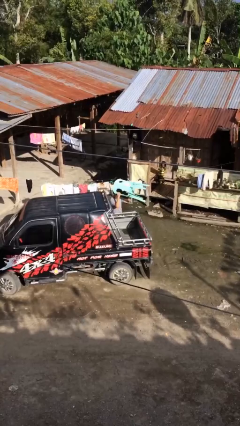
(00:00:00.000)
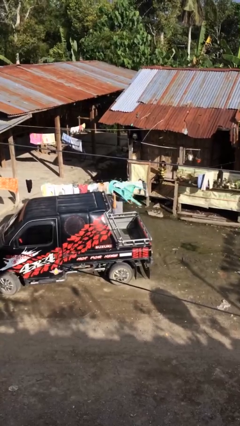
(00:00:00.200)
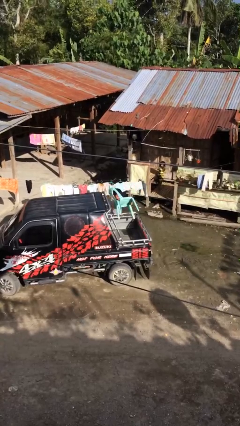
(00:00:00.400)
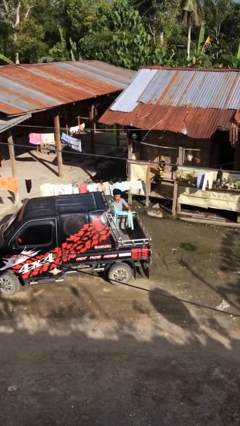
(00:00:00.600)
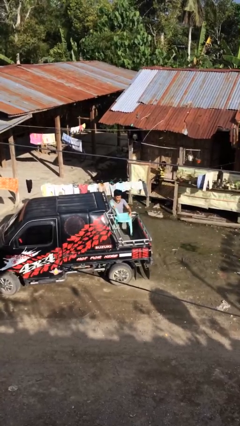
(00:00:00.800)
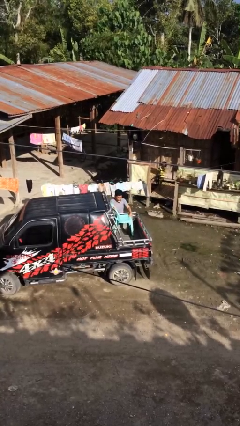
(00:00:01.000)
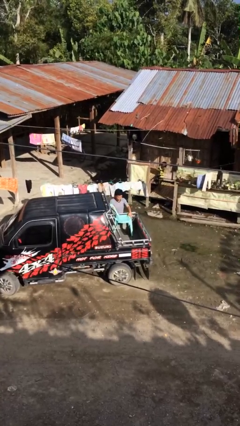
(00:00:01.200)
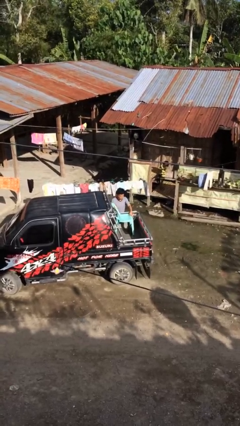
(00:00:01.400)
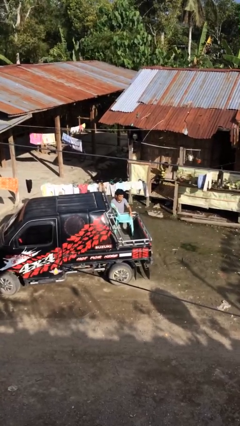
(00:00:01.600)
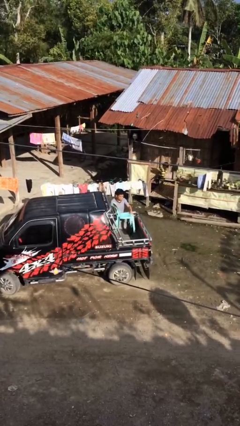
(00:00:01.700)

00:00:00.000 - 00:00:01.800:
person loads car

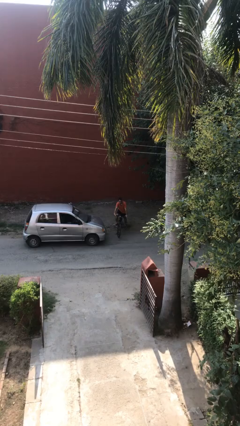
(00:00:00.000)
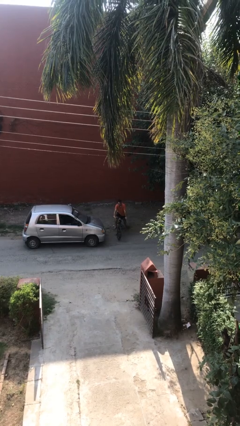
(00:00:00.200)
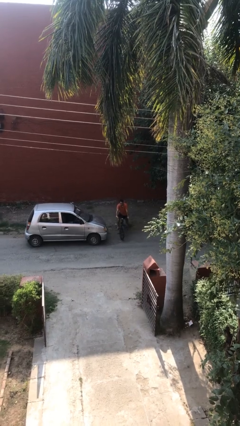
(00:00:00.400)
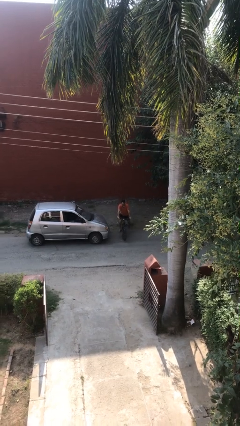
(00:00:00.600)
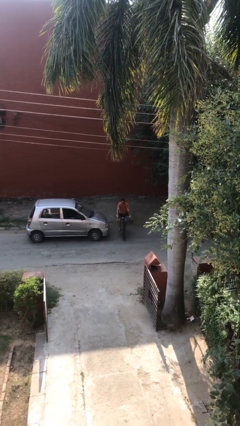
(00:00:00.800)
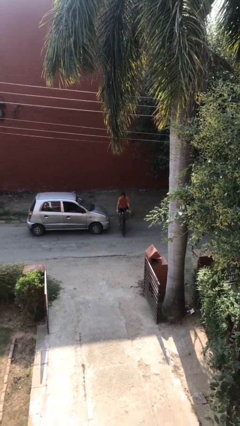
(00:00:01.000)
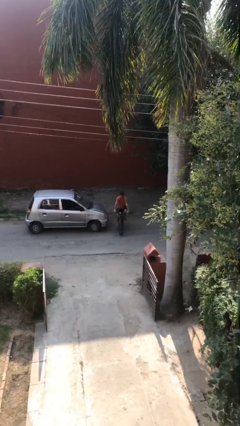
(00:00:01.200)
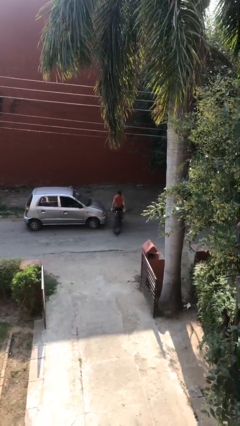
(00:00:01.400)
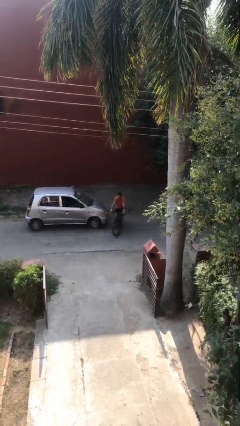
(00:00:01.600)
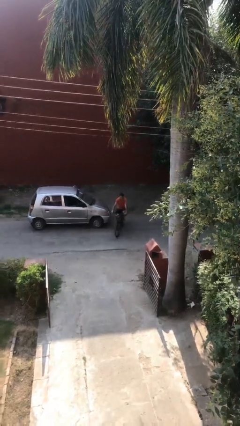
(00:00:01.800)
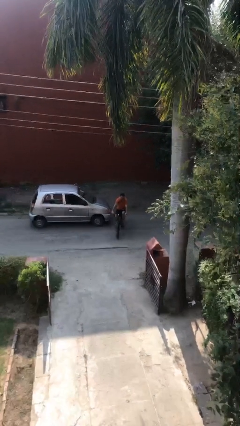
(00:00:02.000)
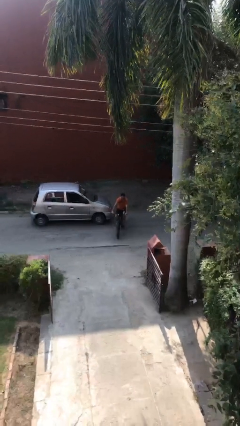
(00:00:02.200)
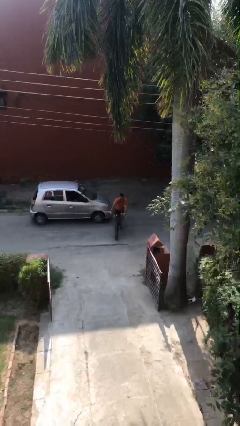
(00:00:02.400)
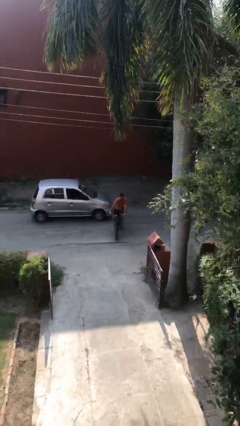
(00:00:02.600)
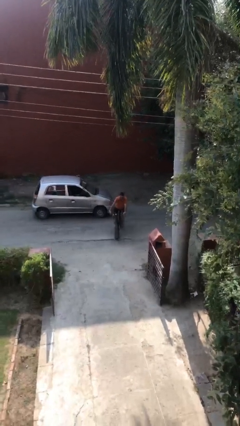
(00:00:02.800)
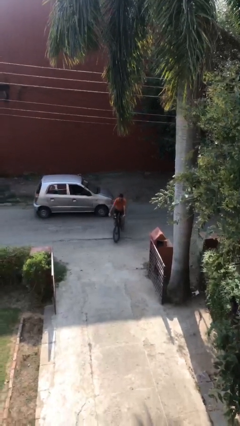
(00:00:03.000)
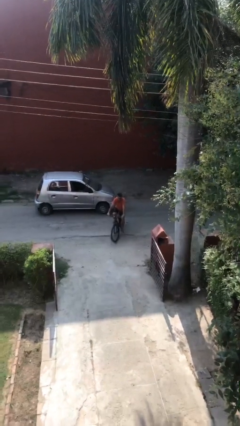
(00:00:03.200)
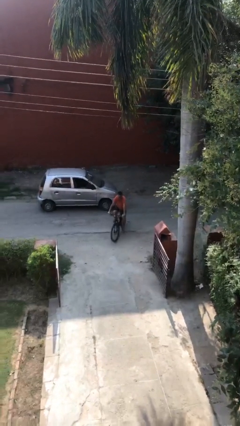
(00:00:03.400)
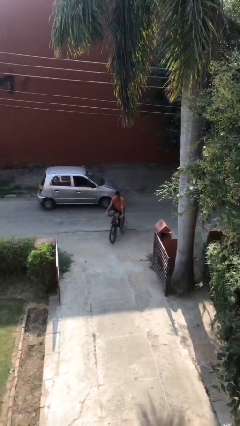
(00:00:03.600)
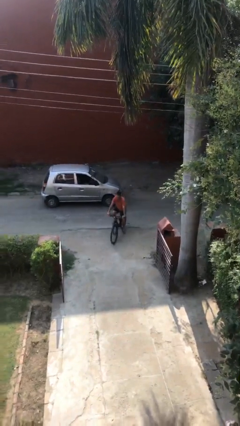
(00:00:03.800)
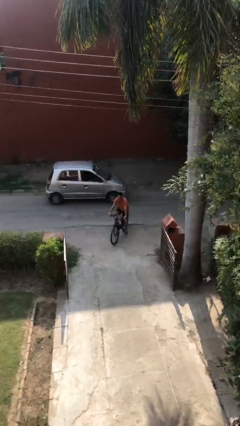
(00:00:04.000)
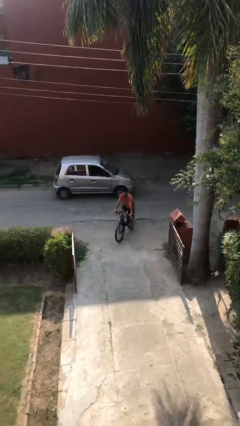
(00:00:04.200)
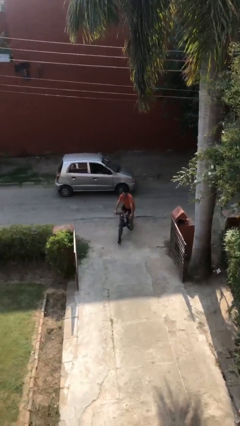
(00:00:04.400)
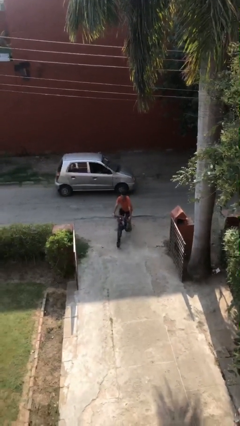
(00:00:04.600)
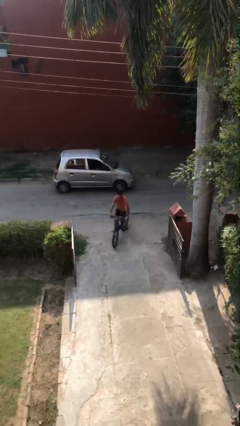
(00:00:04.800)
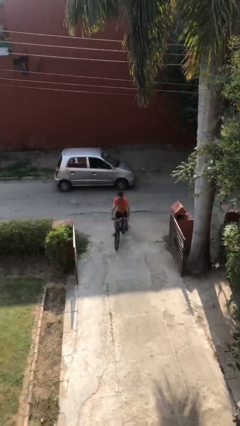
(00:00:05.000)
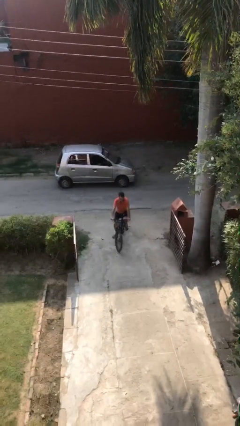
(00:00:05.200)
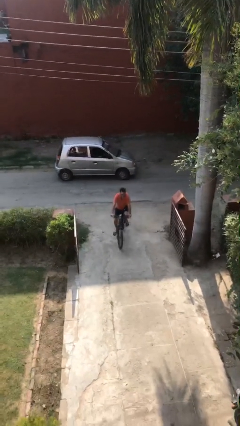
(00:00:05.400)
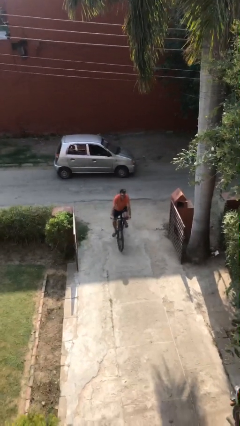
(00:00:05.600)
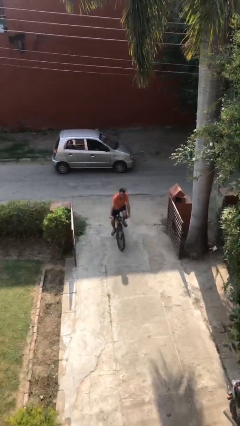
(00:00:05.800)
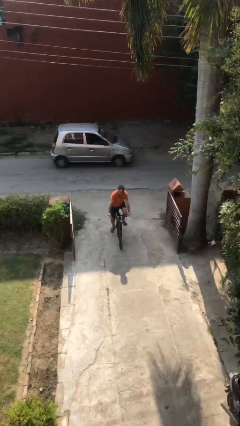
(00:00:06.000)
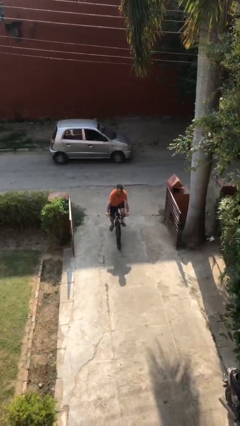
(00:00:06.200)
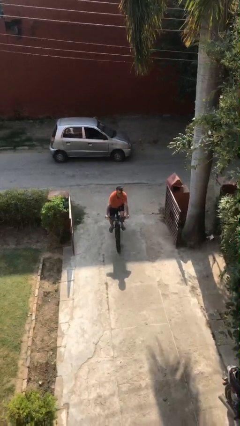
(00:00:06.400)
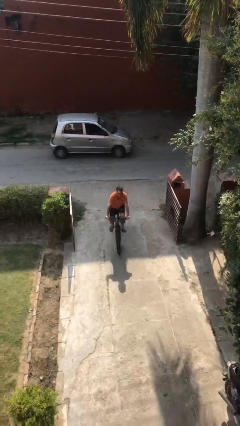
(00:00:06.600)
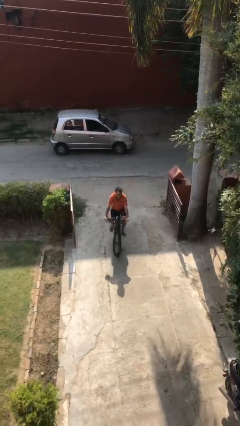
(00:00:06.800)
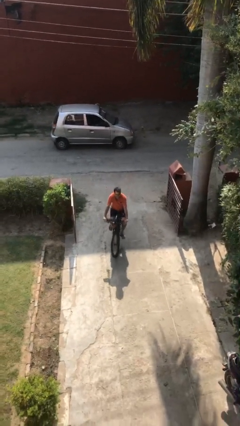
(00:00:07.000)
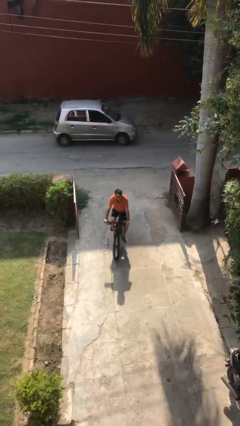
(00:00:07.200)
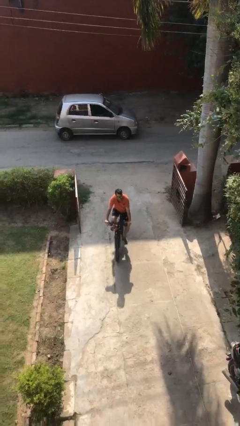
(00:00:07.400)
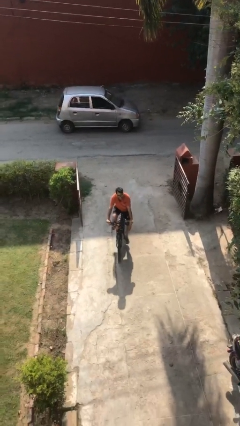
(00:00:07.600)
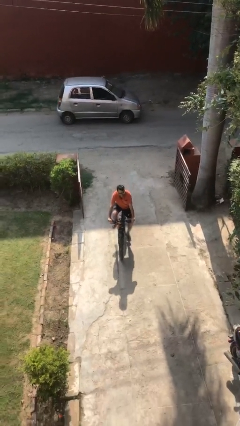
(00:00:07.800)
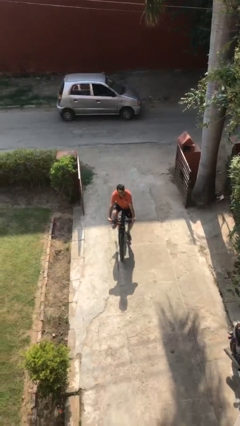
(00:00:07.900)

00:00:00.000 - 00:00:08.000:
person rides bicycle

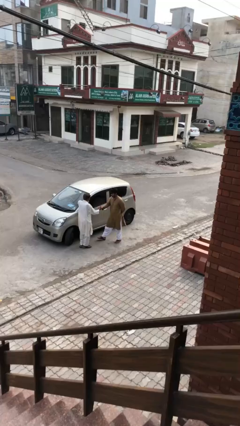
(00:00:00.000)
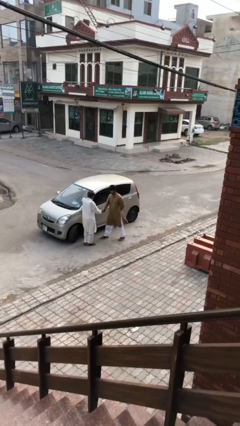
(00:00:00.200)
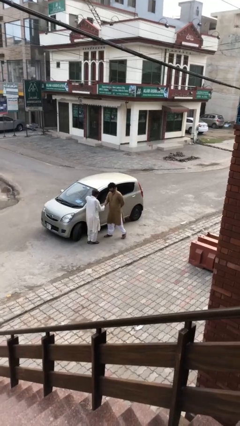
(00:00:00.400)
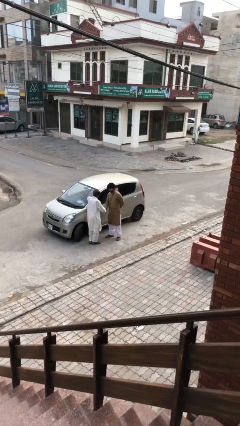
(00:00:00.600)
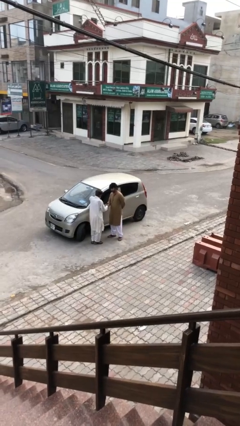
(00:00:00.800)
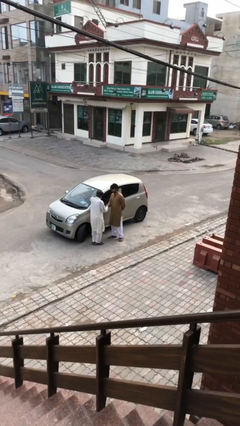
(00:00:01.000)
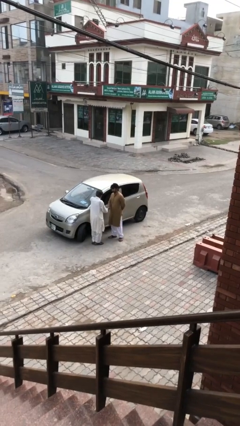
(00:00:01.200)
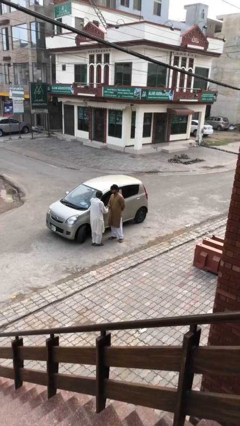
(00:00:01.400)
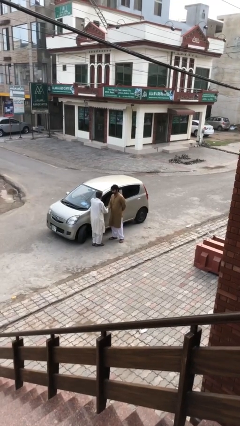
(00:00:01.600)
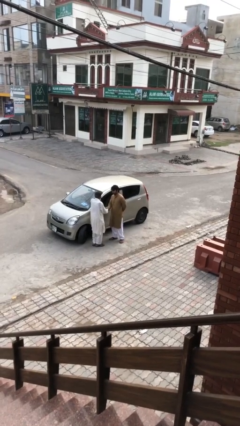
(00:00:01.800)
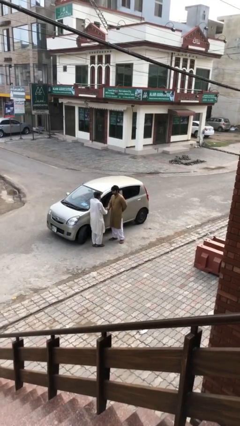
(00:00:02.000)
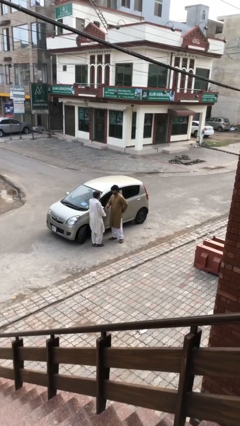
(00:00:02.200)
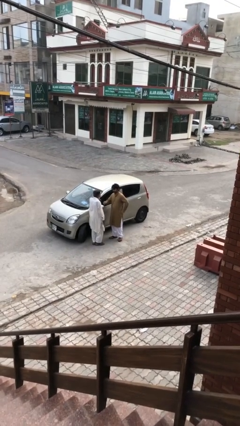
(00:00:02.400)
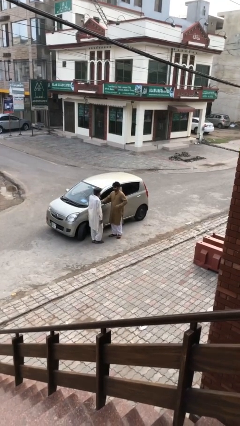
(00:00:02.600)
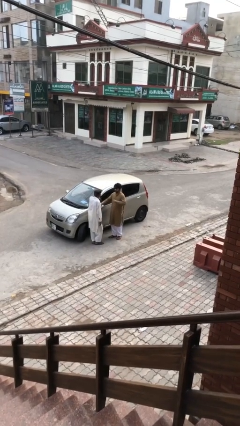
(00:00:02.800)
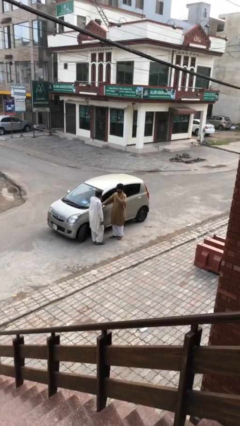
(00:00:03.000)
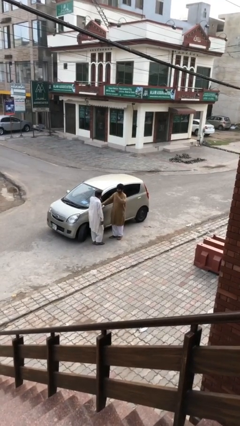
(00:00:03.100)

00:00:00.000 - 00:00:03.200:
person shakes hand

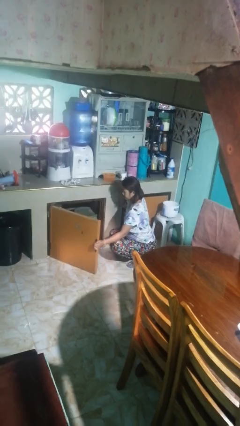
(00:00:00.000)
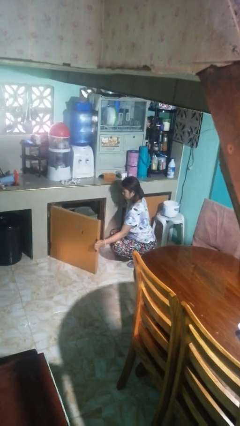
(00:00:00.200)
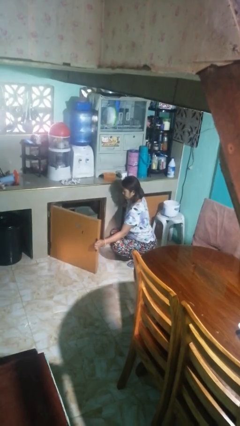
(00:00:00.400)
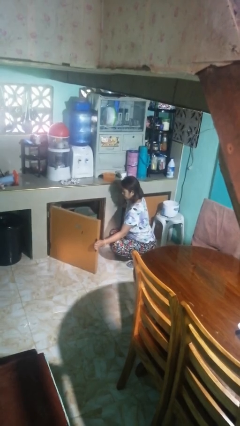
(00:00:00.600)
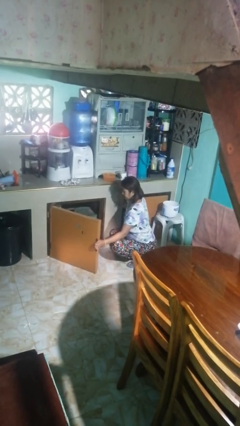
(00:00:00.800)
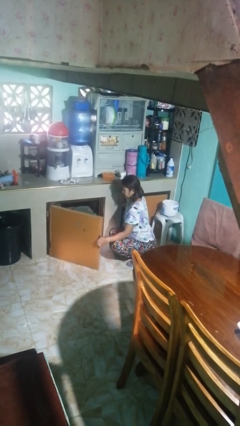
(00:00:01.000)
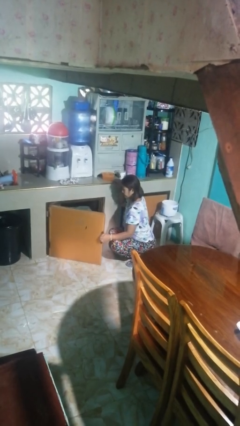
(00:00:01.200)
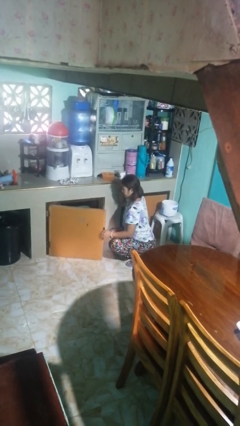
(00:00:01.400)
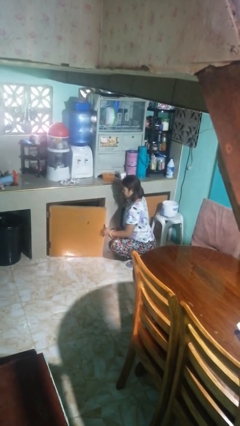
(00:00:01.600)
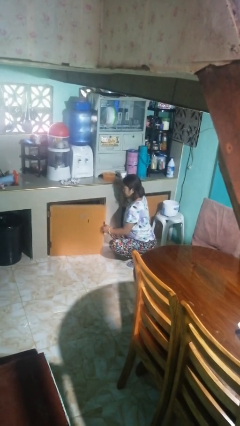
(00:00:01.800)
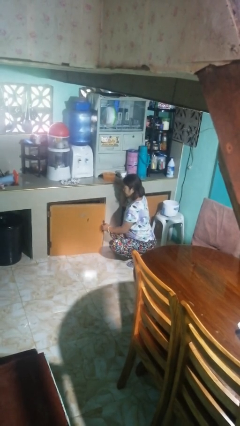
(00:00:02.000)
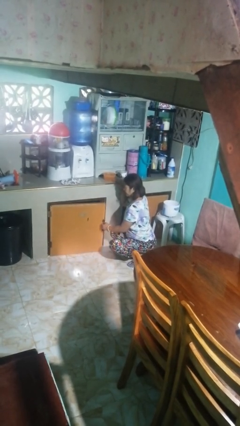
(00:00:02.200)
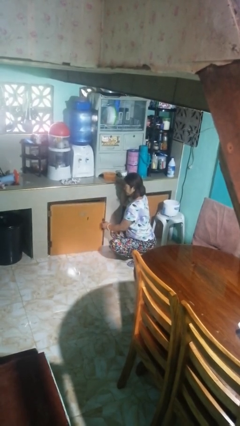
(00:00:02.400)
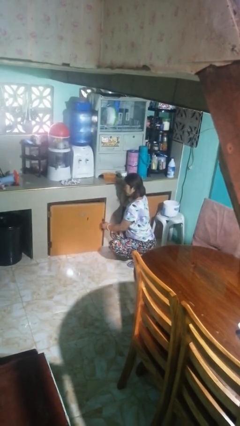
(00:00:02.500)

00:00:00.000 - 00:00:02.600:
person closes cabinet

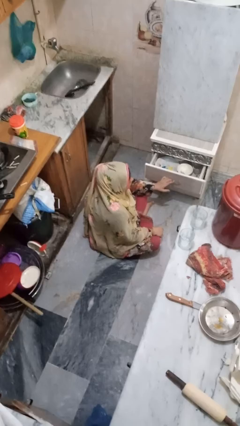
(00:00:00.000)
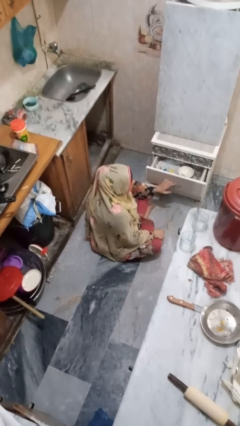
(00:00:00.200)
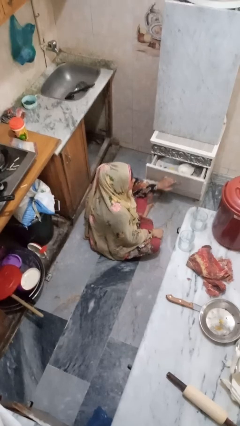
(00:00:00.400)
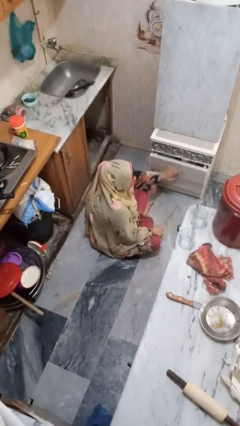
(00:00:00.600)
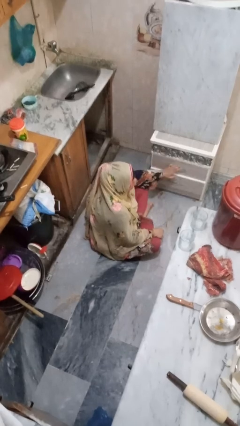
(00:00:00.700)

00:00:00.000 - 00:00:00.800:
person closes kitchen drawer

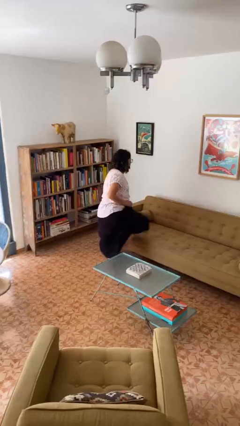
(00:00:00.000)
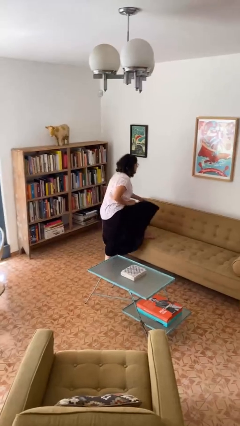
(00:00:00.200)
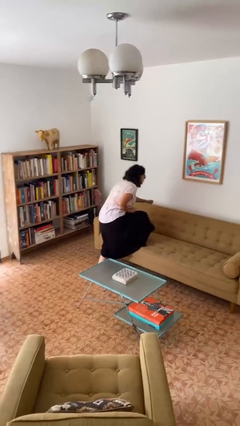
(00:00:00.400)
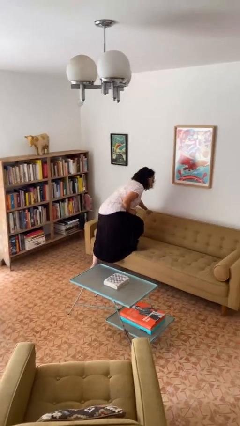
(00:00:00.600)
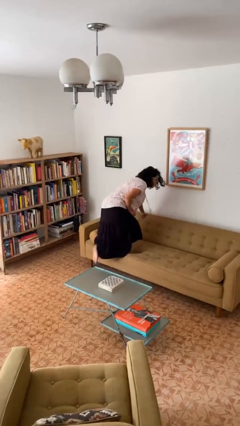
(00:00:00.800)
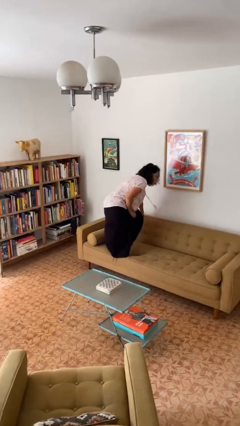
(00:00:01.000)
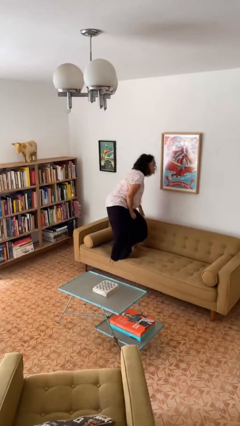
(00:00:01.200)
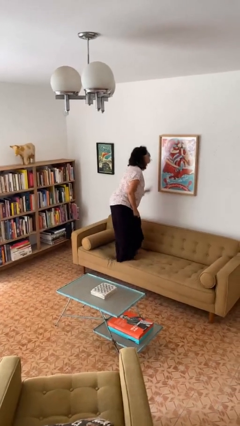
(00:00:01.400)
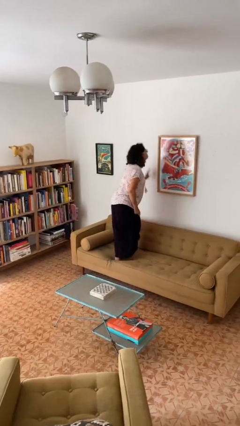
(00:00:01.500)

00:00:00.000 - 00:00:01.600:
person climbs on couch
